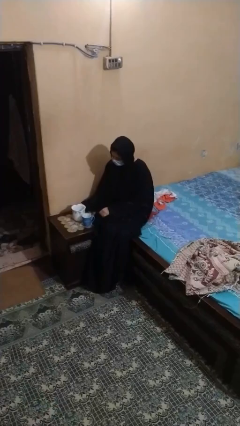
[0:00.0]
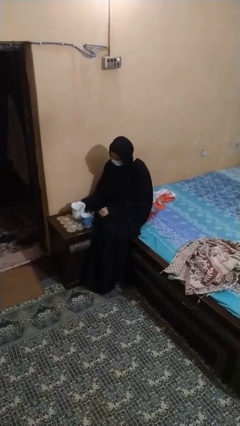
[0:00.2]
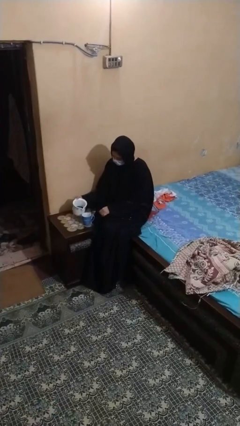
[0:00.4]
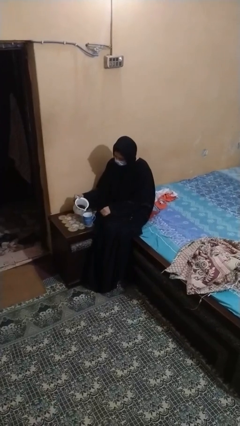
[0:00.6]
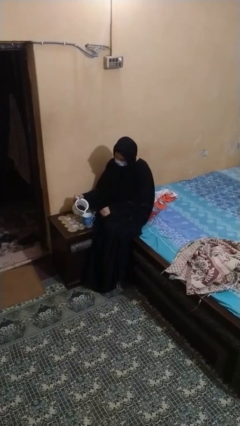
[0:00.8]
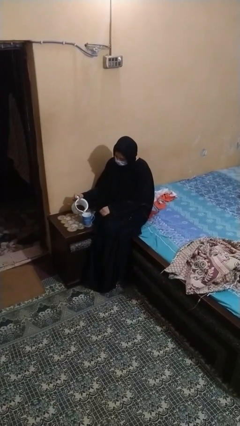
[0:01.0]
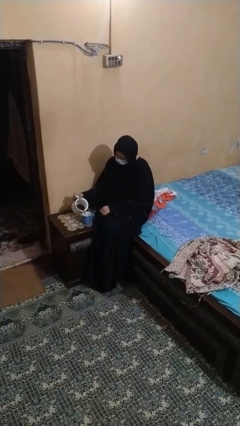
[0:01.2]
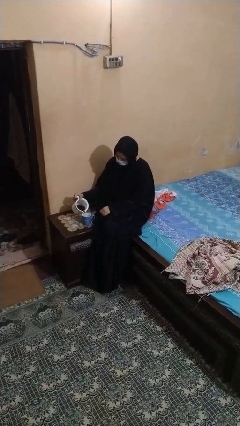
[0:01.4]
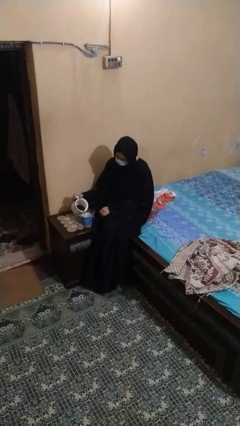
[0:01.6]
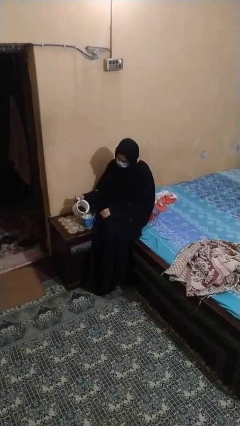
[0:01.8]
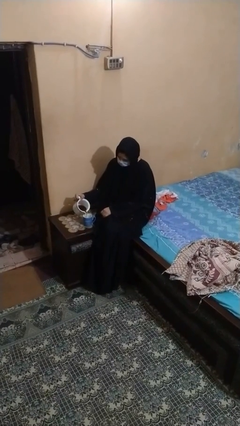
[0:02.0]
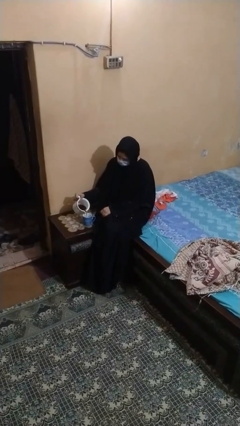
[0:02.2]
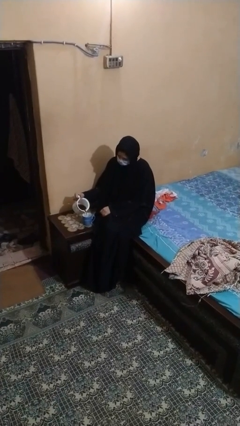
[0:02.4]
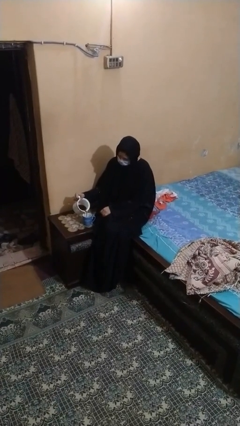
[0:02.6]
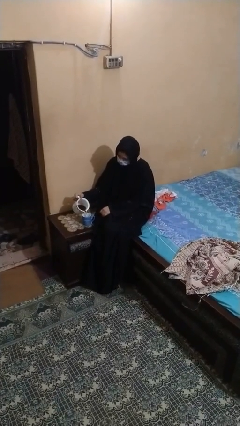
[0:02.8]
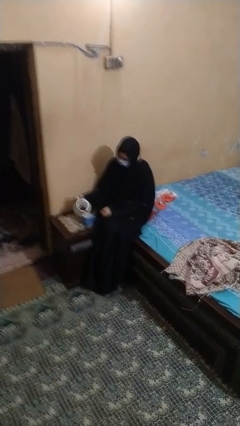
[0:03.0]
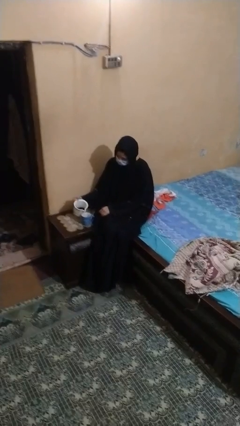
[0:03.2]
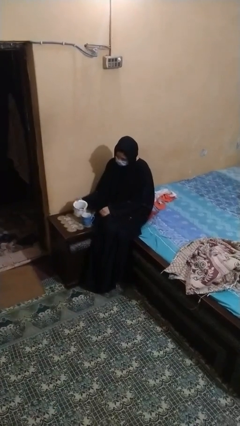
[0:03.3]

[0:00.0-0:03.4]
person pours coffee into mug

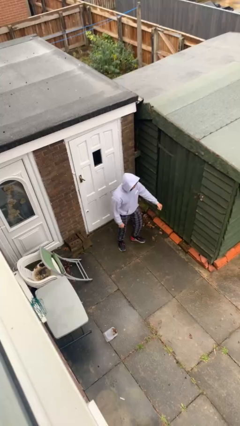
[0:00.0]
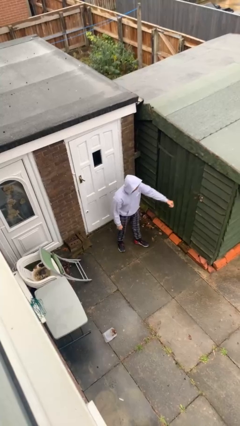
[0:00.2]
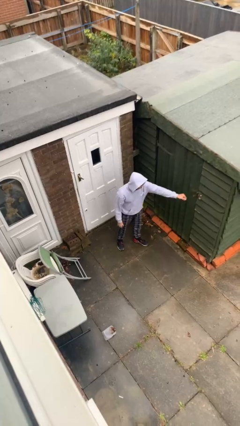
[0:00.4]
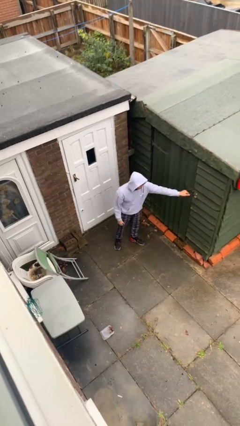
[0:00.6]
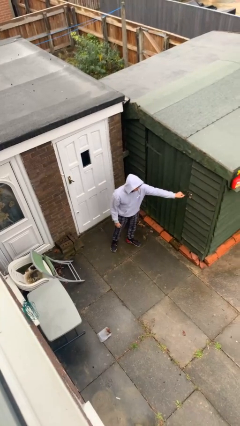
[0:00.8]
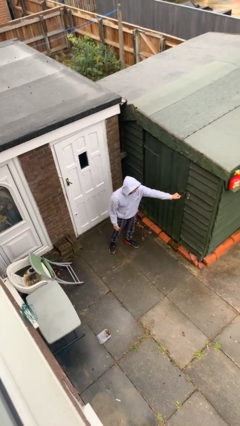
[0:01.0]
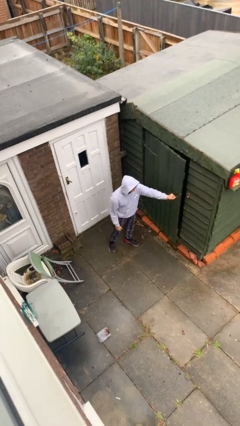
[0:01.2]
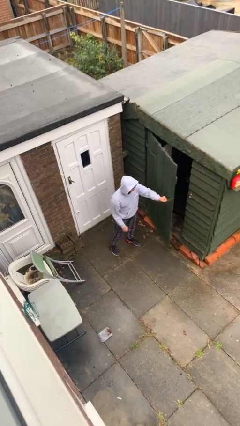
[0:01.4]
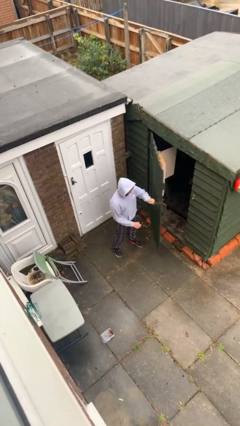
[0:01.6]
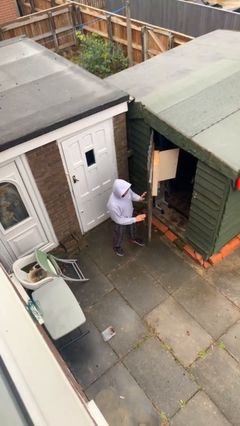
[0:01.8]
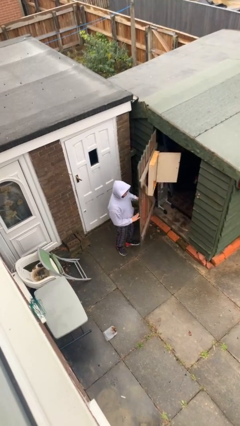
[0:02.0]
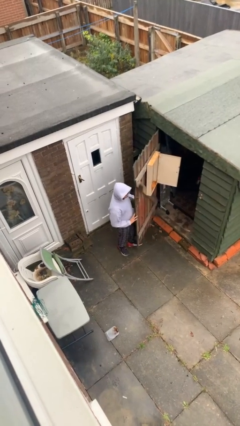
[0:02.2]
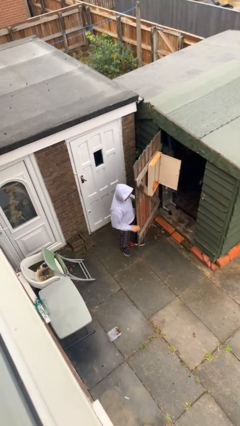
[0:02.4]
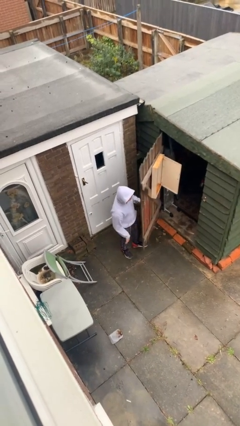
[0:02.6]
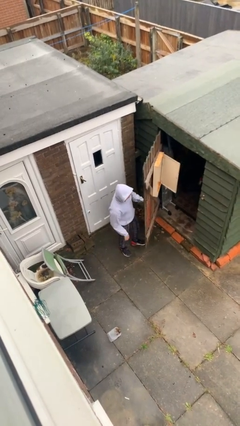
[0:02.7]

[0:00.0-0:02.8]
person opens facility door

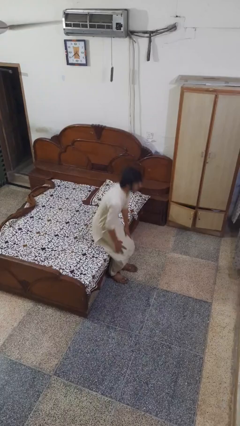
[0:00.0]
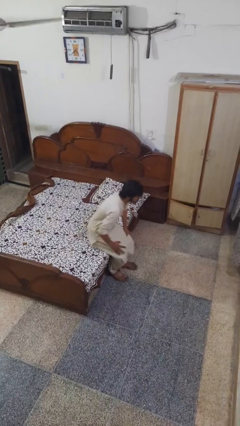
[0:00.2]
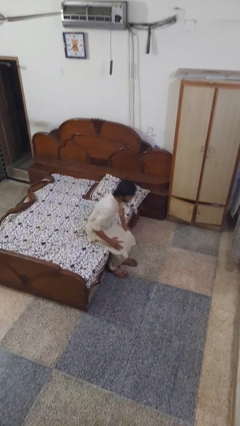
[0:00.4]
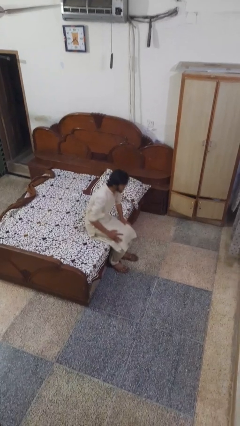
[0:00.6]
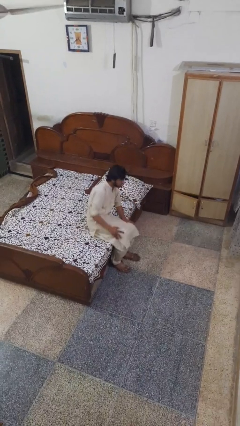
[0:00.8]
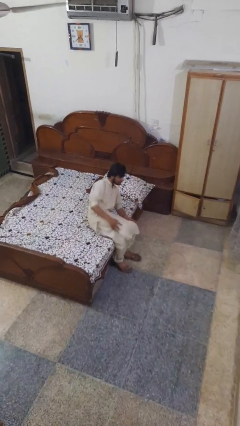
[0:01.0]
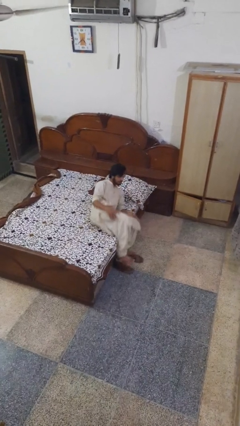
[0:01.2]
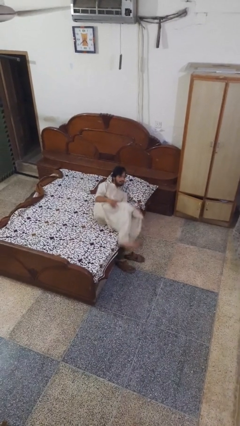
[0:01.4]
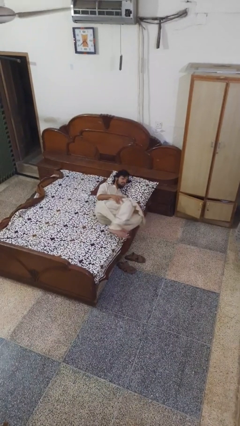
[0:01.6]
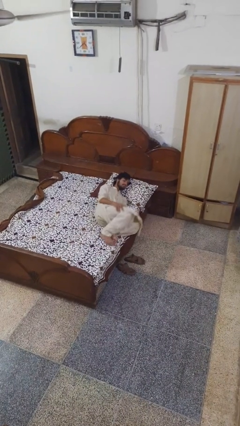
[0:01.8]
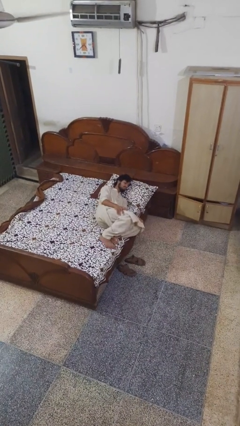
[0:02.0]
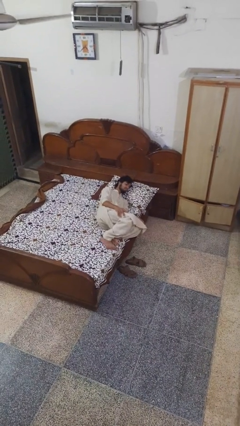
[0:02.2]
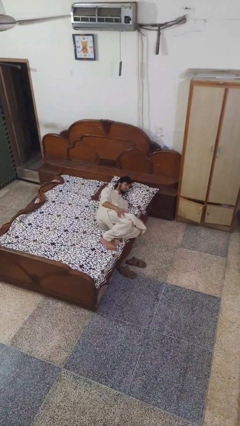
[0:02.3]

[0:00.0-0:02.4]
person lies down on bed

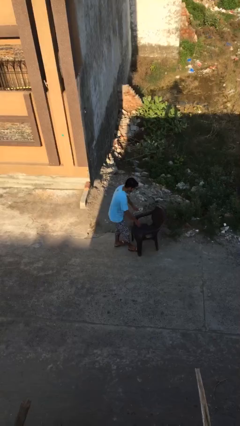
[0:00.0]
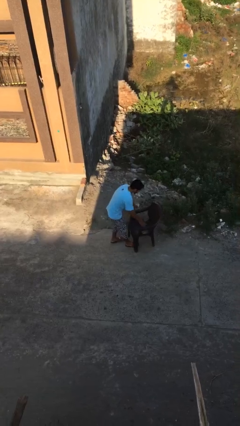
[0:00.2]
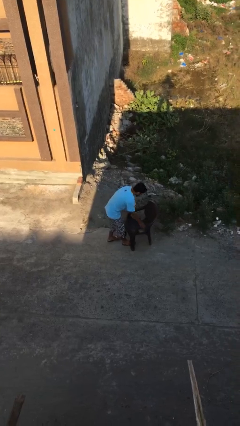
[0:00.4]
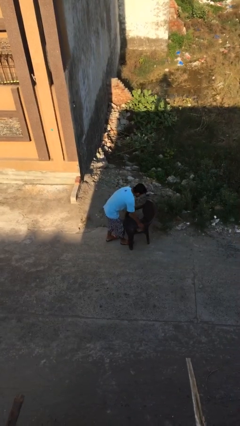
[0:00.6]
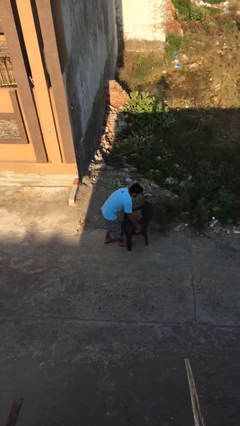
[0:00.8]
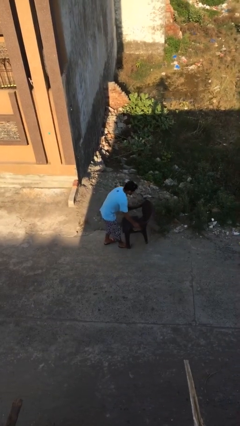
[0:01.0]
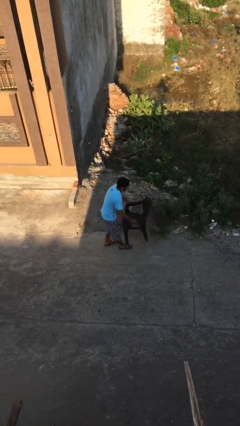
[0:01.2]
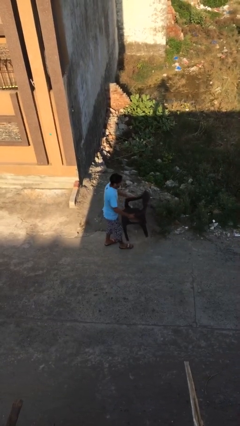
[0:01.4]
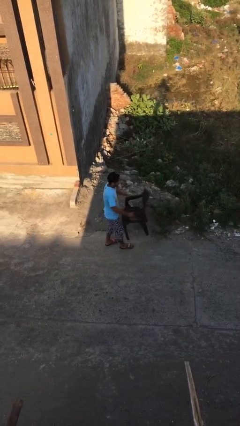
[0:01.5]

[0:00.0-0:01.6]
person picks up object from floor

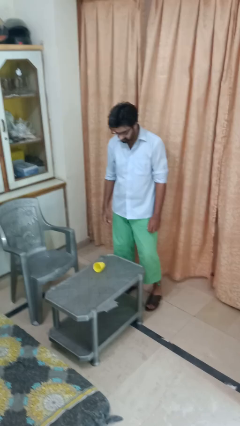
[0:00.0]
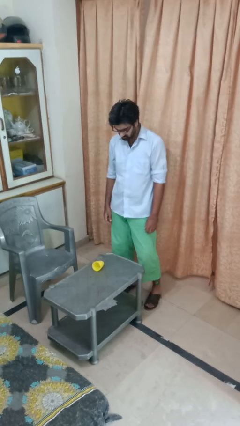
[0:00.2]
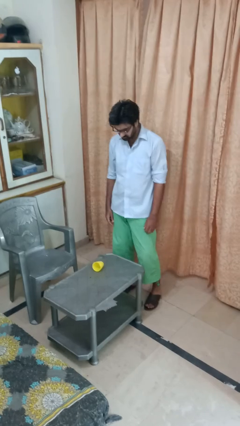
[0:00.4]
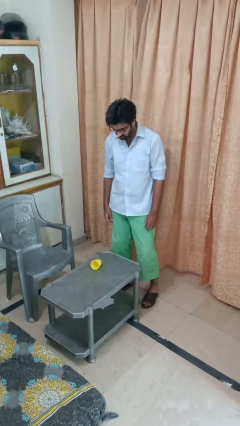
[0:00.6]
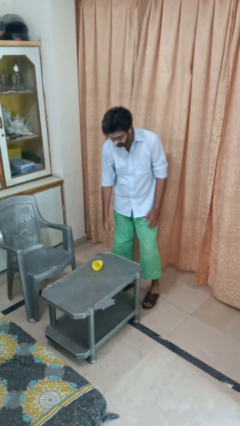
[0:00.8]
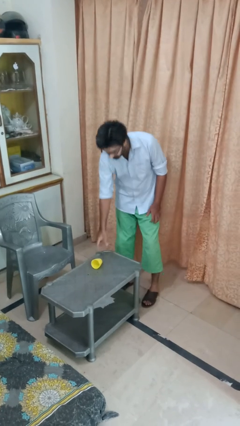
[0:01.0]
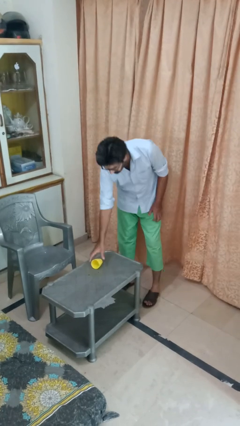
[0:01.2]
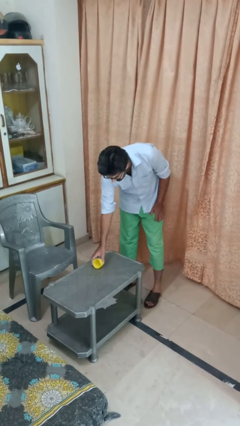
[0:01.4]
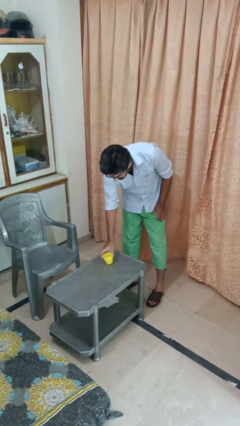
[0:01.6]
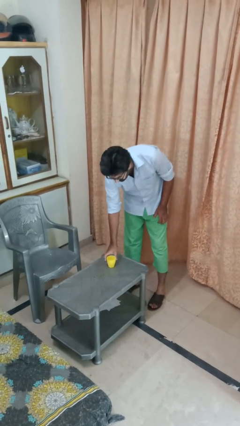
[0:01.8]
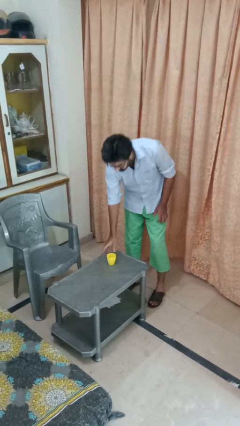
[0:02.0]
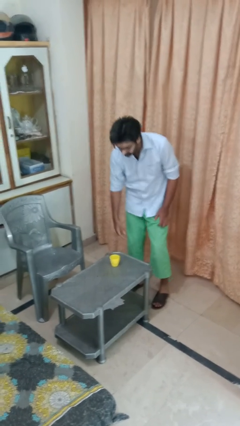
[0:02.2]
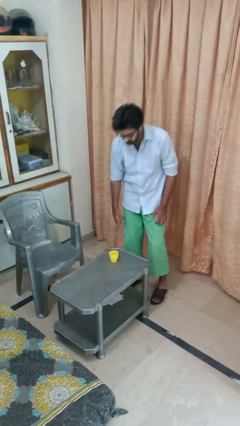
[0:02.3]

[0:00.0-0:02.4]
person sets upright glass

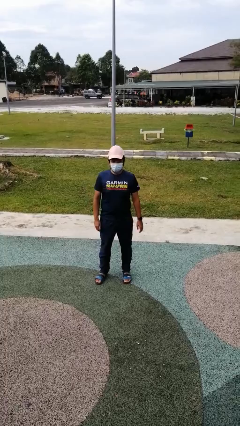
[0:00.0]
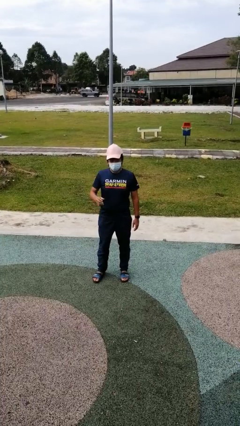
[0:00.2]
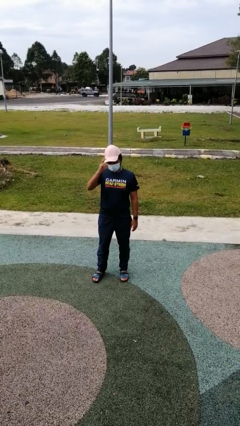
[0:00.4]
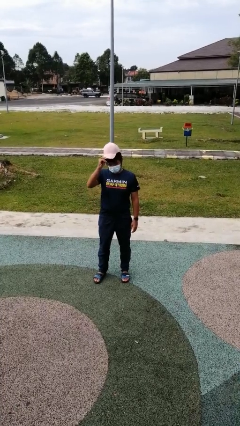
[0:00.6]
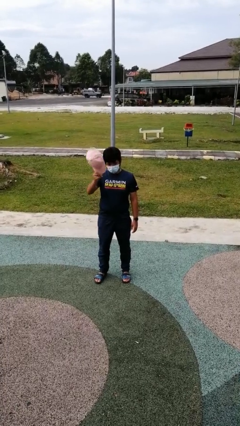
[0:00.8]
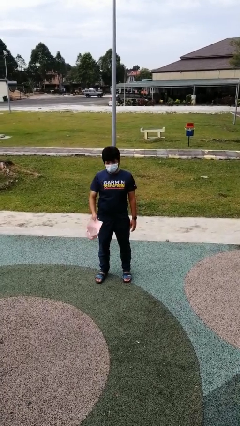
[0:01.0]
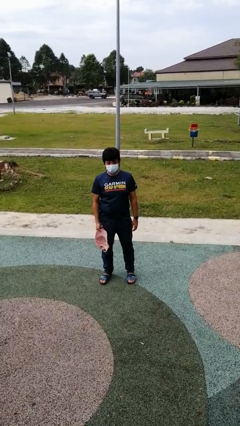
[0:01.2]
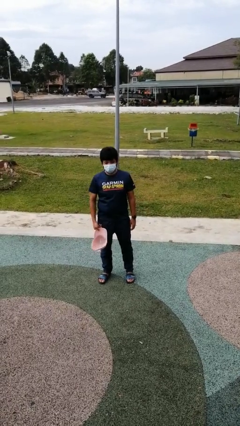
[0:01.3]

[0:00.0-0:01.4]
person takes off hat

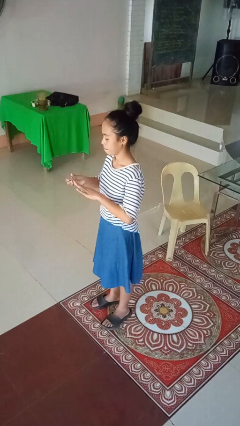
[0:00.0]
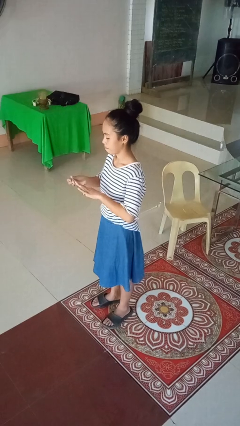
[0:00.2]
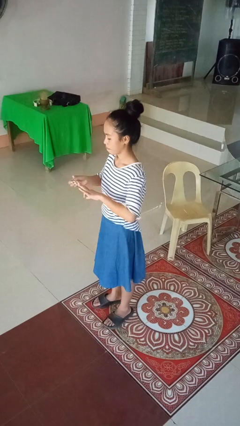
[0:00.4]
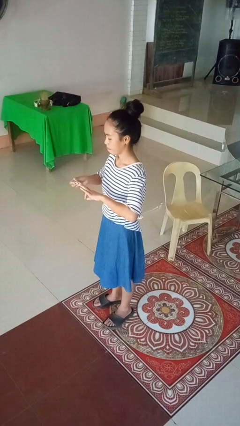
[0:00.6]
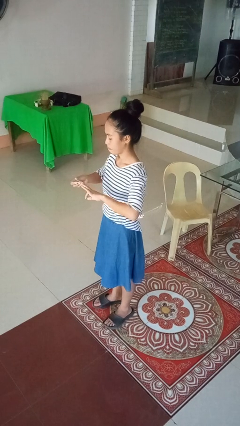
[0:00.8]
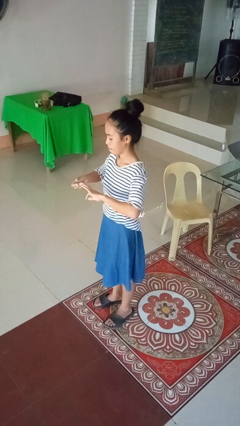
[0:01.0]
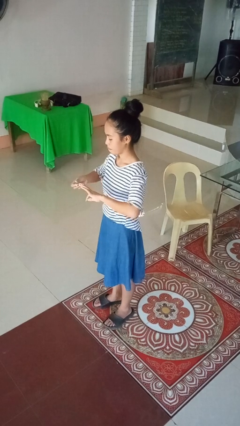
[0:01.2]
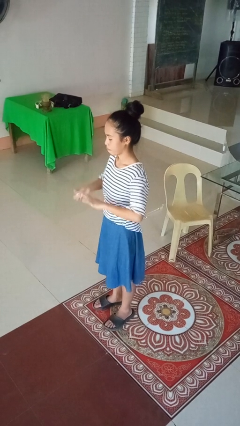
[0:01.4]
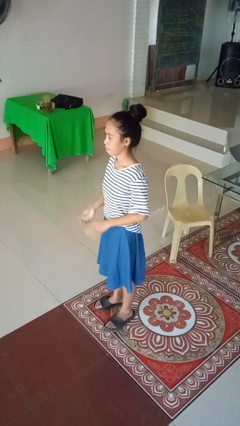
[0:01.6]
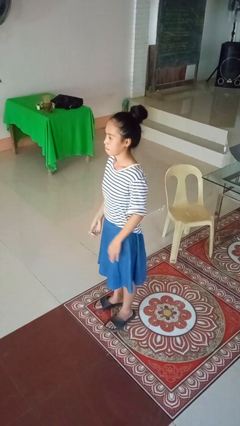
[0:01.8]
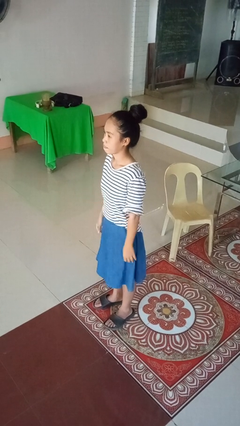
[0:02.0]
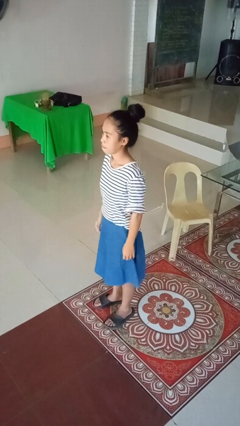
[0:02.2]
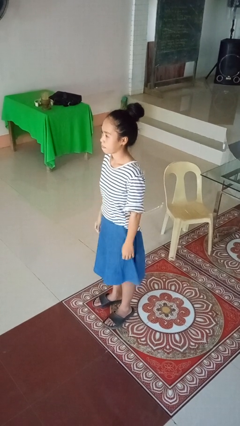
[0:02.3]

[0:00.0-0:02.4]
person clips fingernails

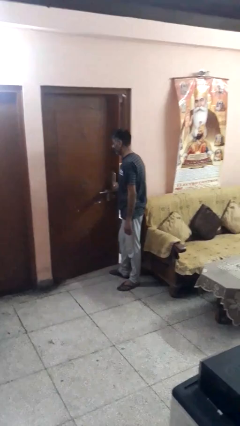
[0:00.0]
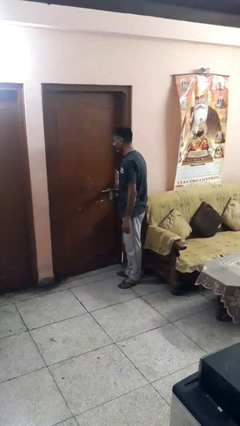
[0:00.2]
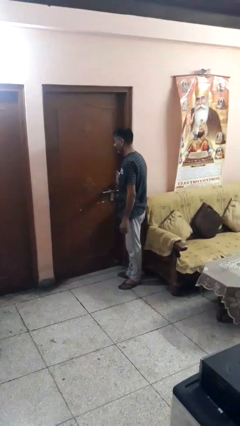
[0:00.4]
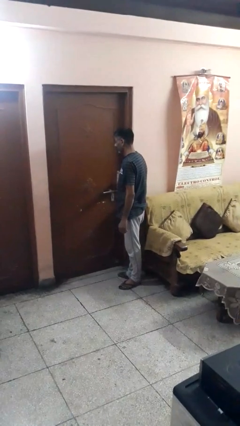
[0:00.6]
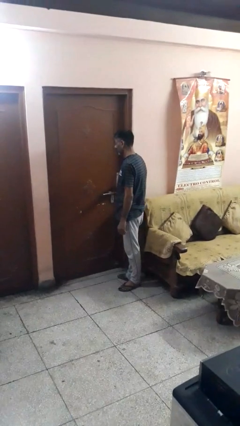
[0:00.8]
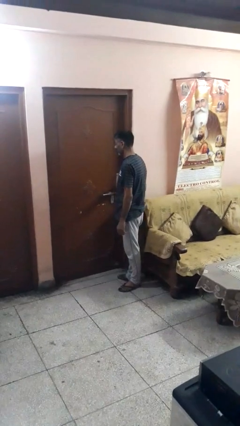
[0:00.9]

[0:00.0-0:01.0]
person closes facility door
